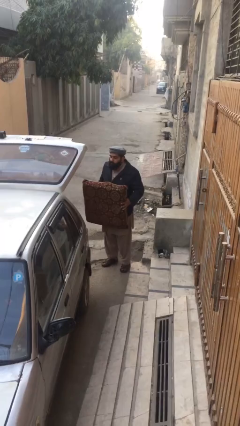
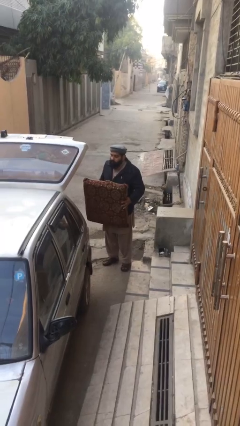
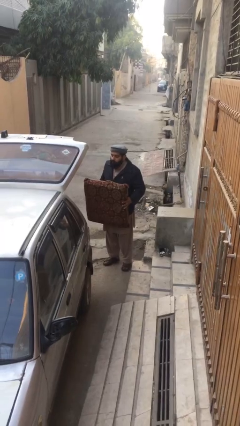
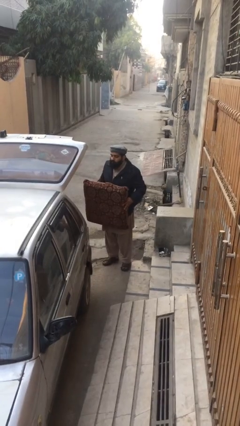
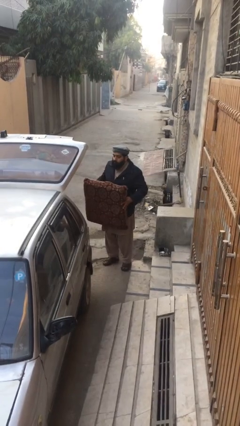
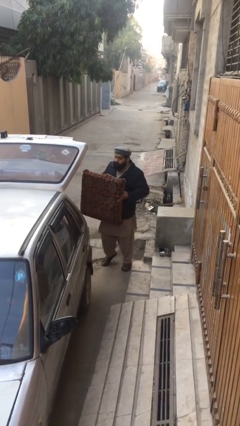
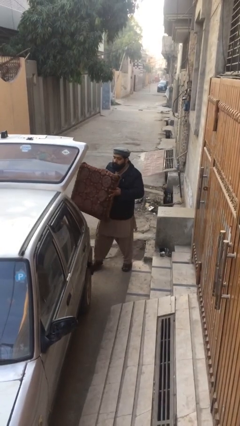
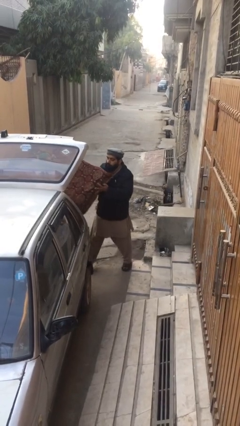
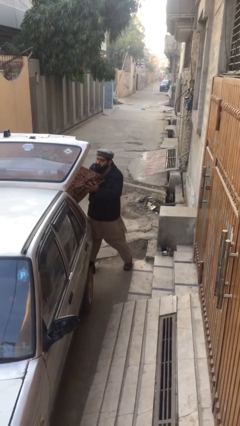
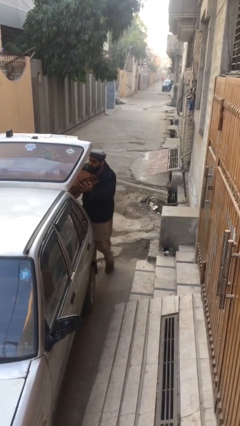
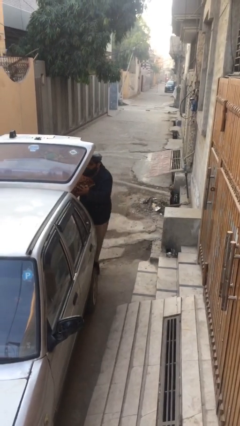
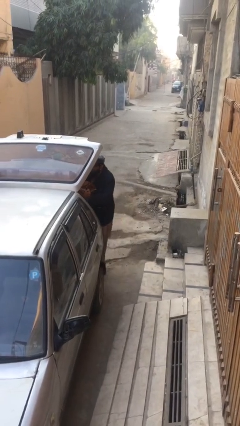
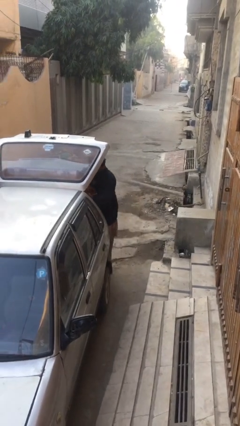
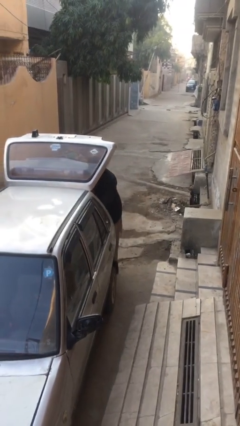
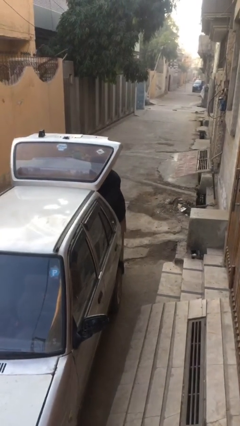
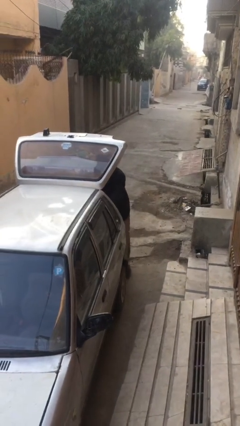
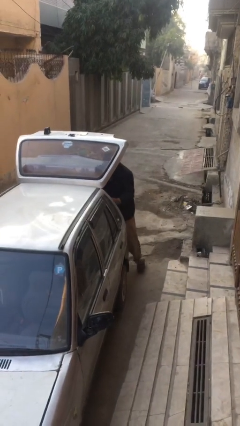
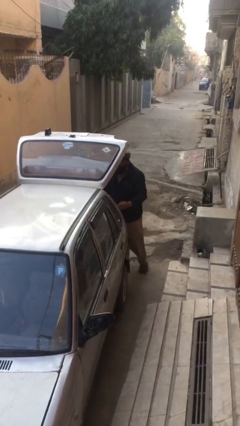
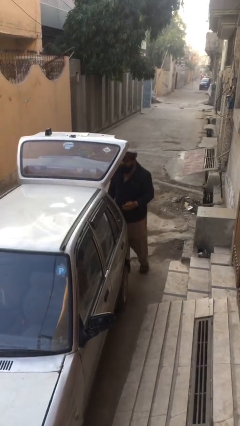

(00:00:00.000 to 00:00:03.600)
person loads car

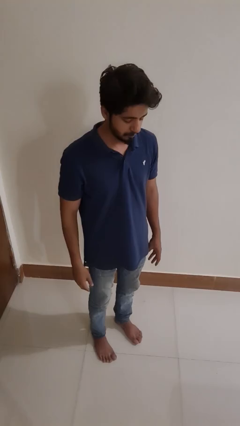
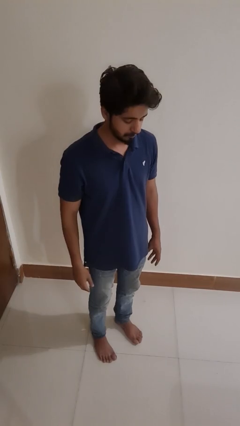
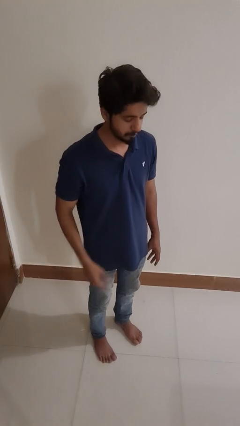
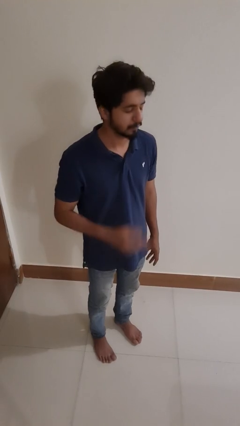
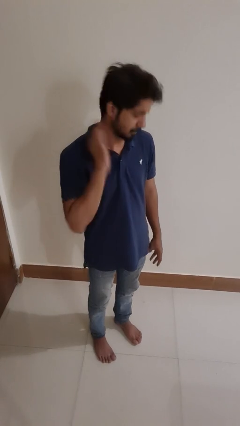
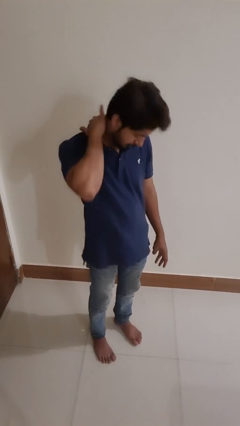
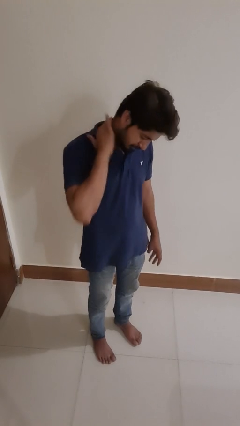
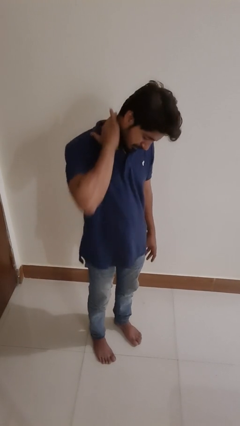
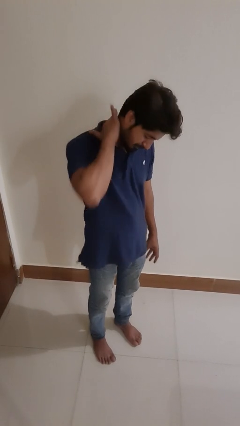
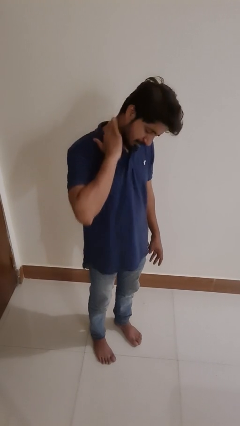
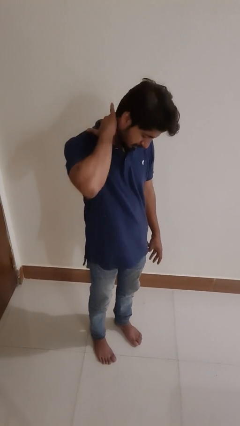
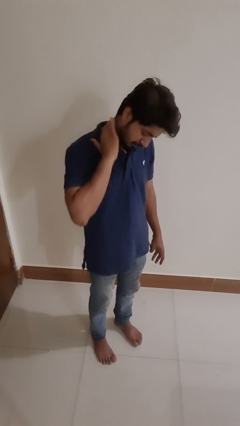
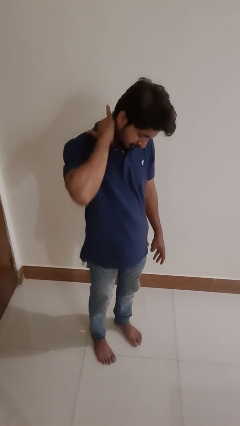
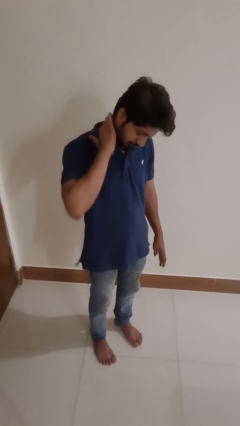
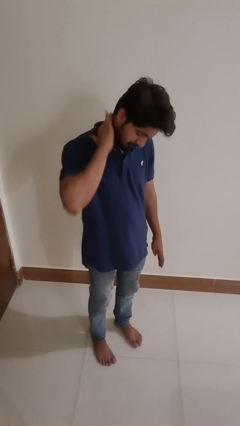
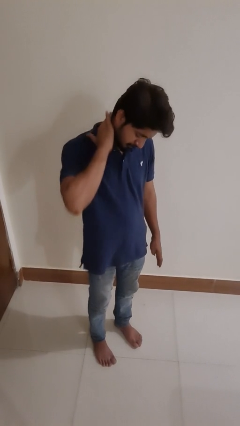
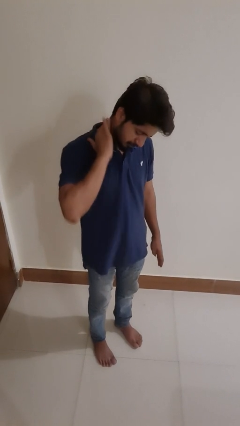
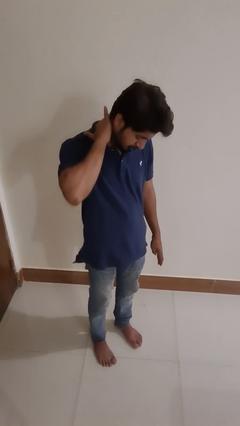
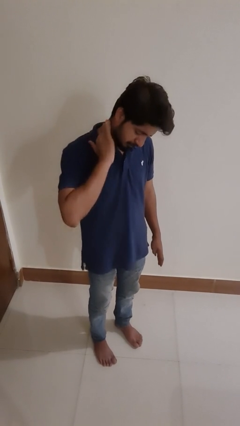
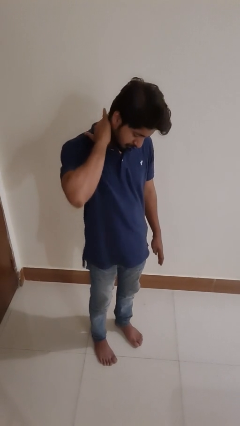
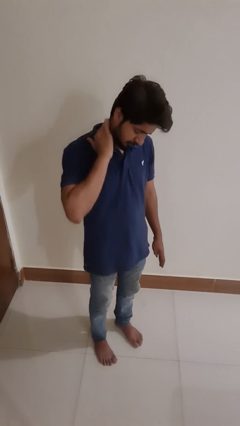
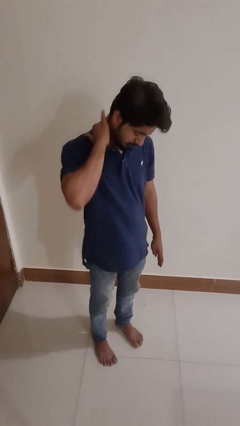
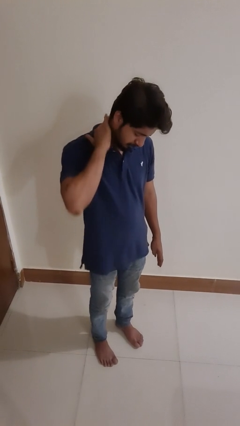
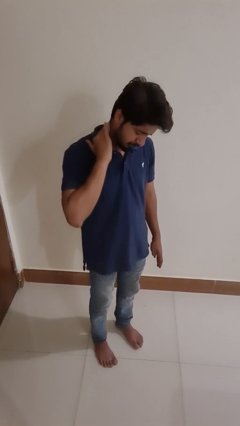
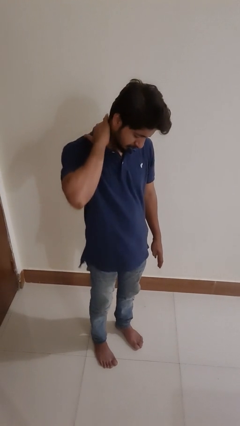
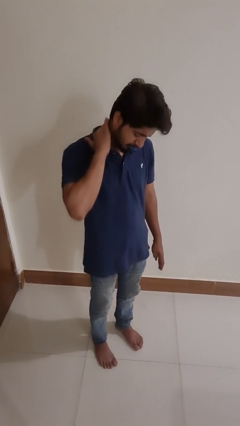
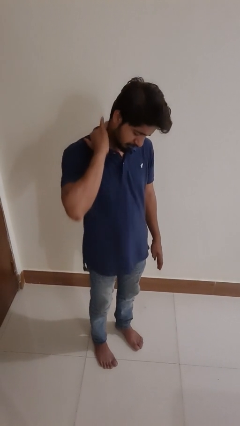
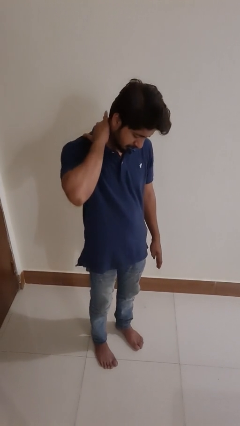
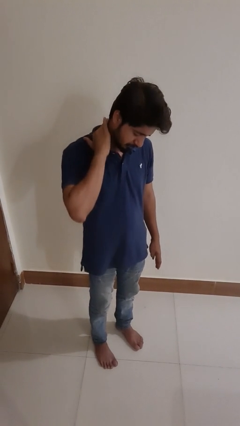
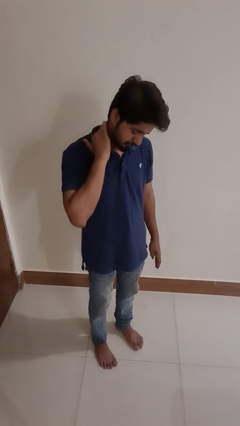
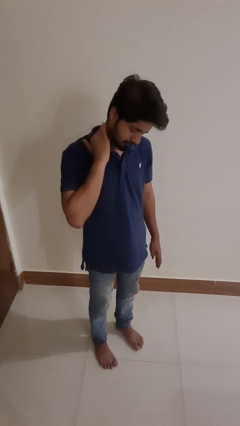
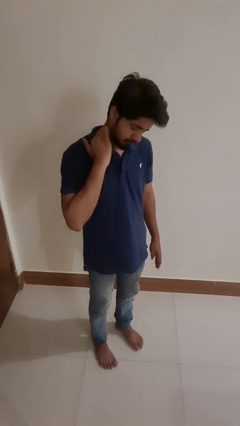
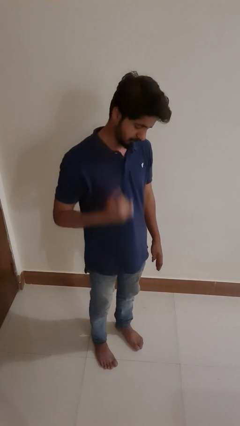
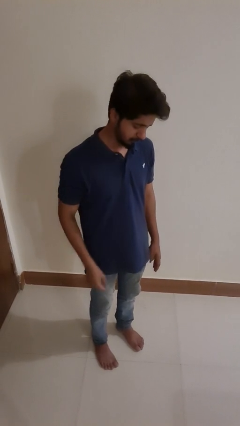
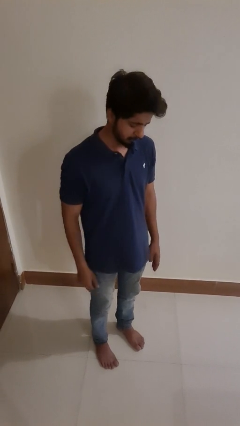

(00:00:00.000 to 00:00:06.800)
person rubs neck

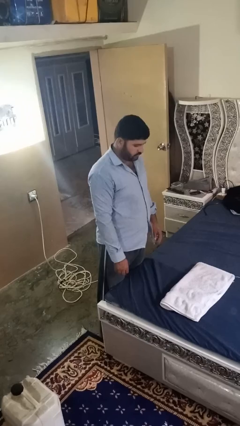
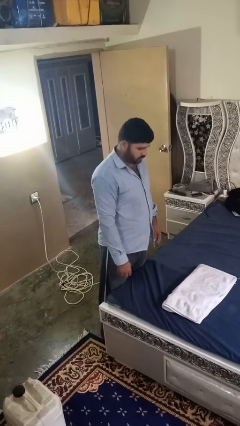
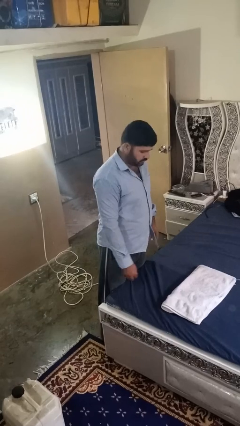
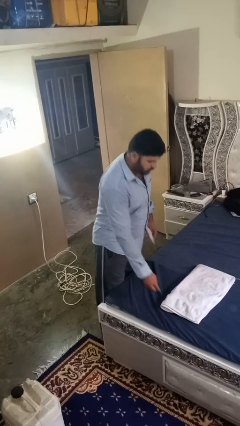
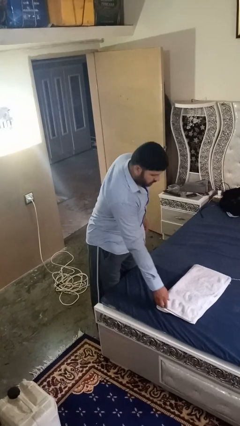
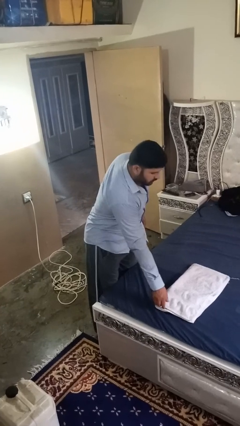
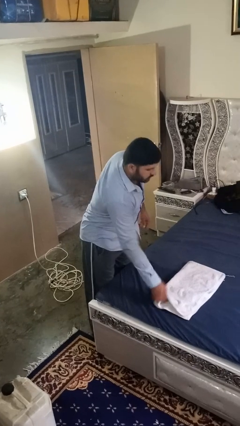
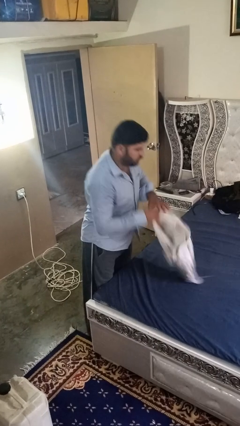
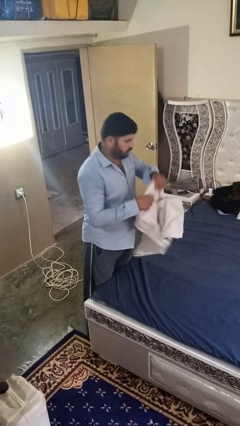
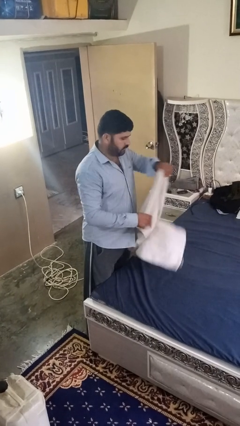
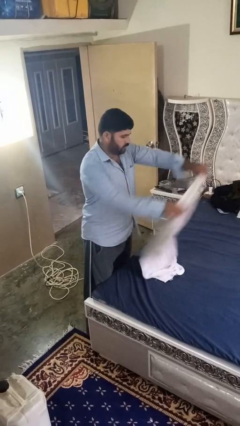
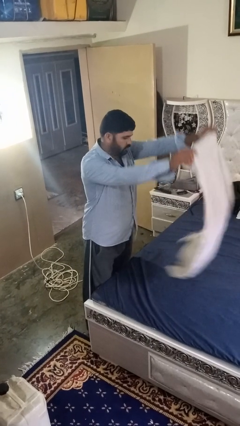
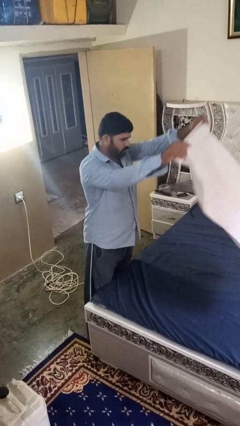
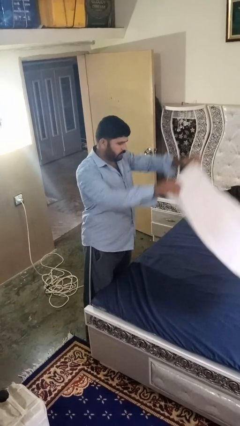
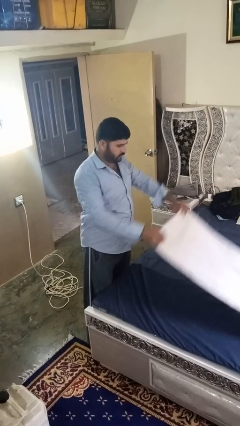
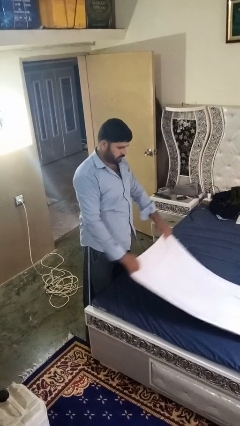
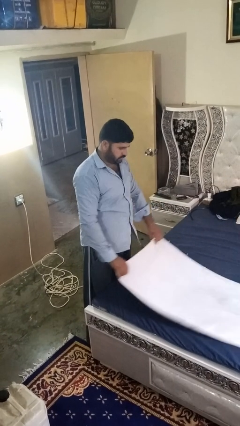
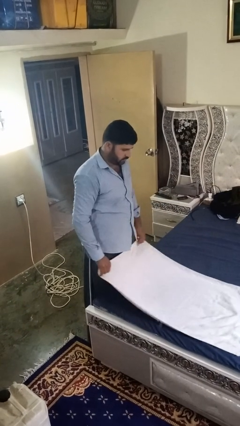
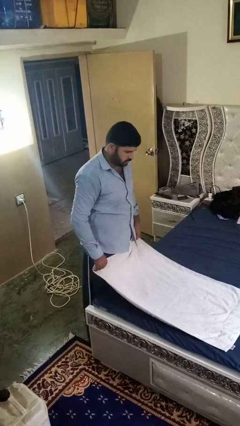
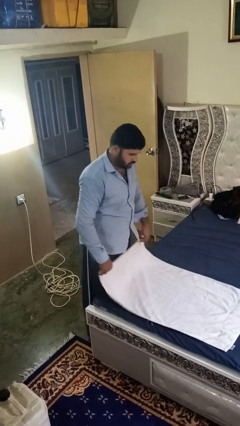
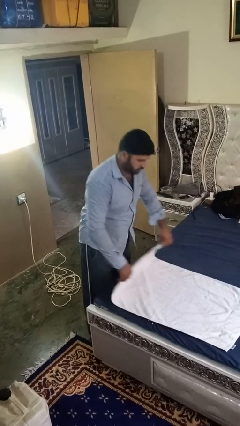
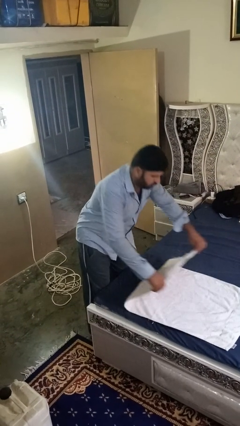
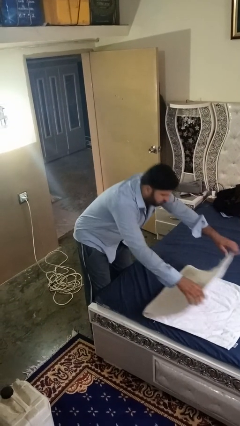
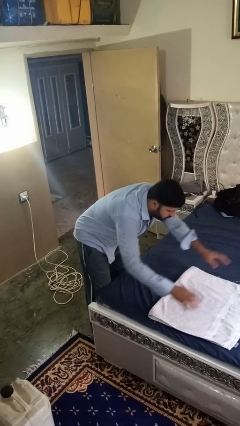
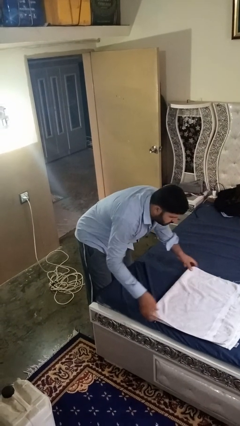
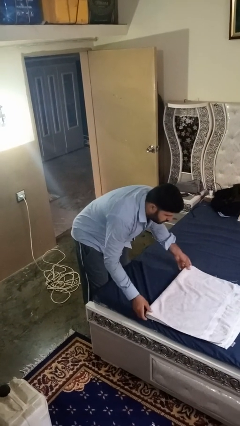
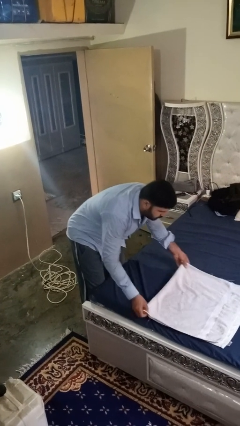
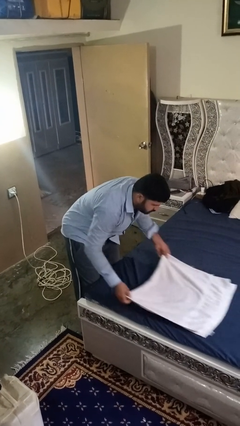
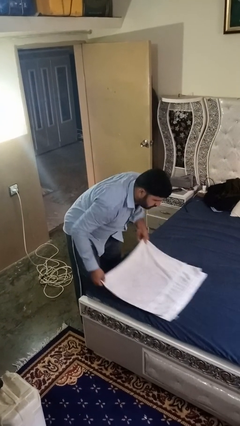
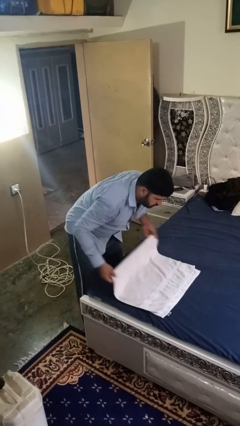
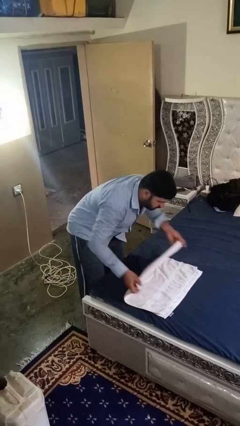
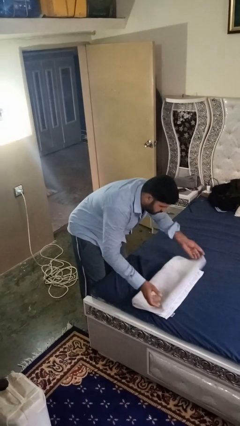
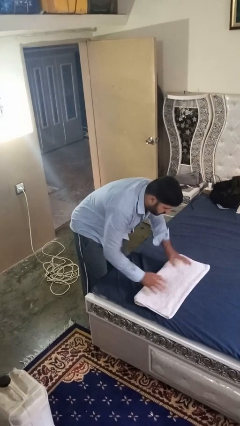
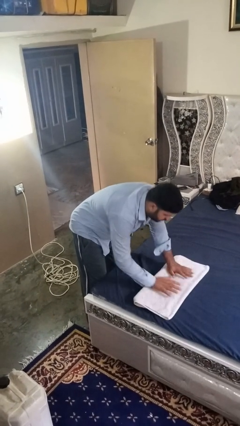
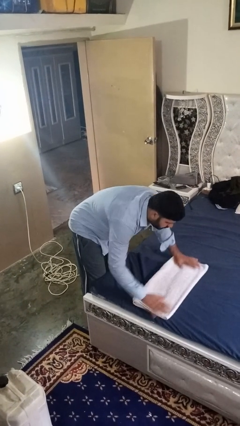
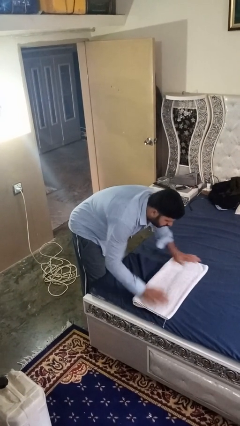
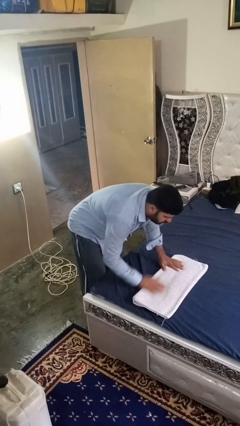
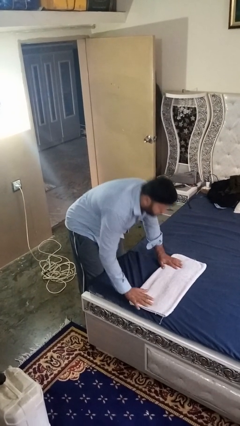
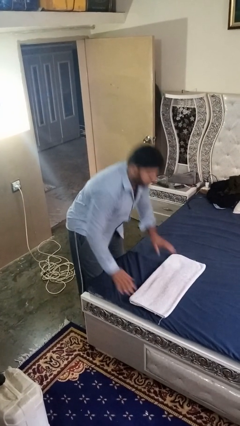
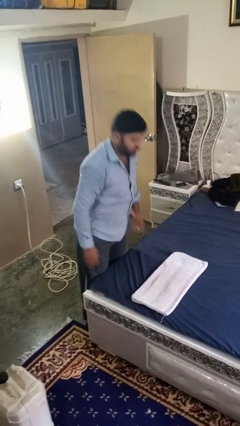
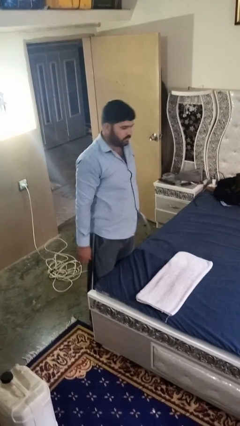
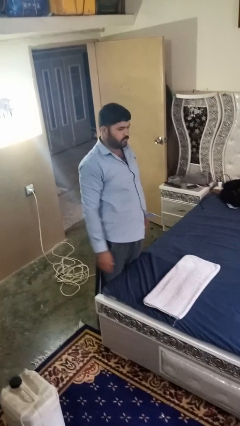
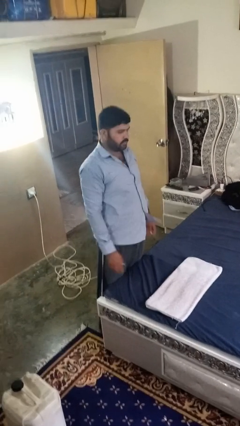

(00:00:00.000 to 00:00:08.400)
person folds towel
